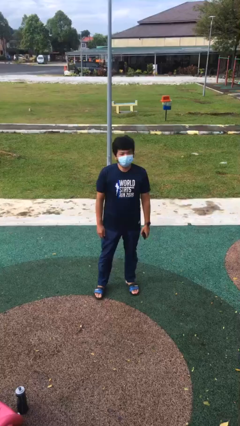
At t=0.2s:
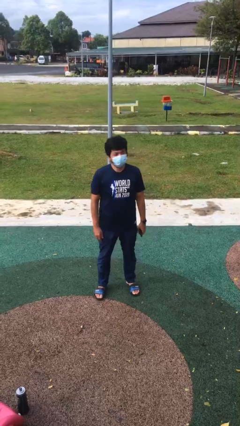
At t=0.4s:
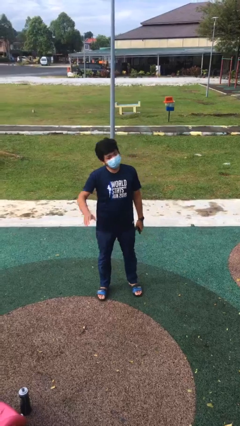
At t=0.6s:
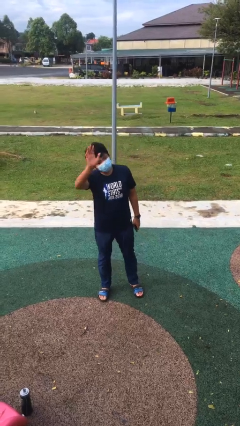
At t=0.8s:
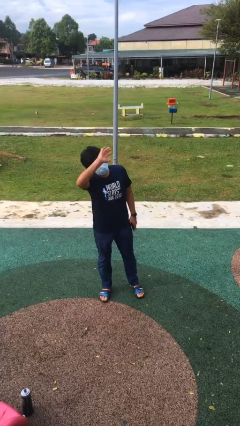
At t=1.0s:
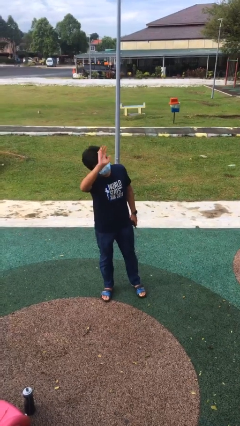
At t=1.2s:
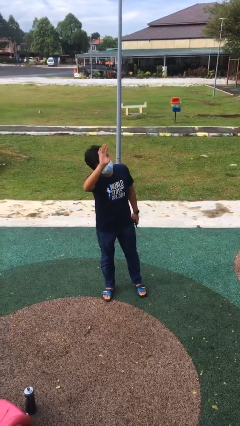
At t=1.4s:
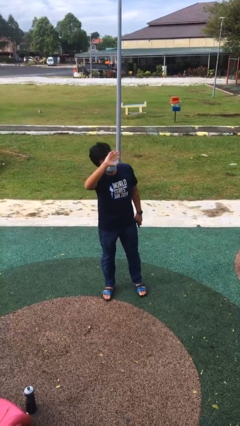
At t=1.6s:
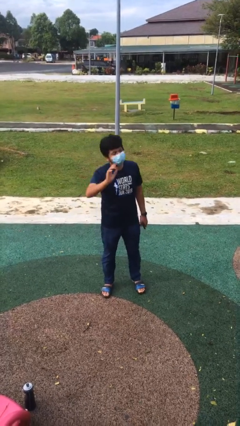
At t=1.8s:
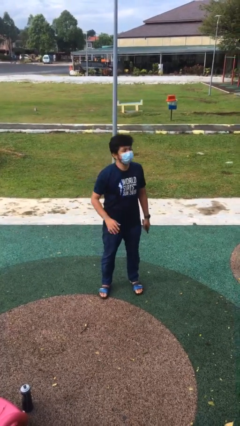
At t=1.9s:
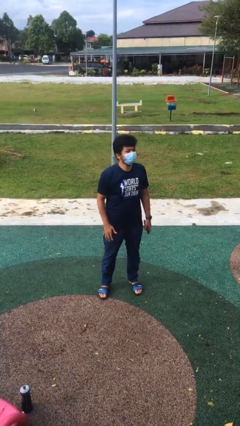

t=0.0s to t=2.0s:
person waves at person

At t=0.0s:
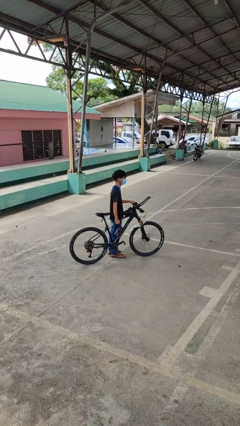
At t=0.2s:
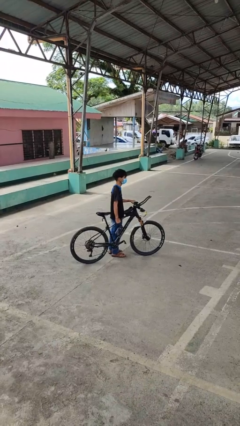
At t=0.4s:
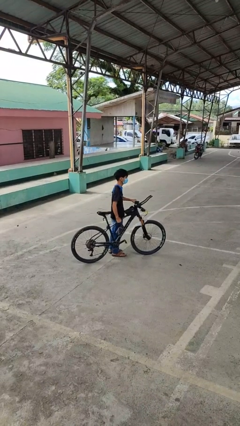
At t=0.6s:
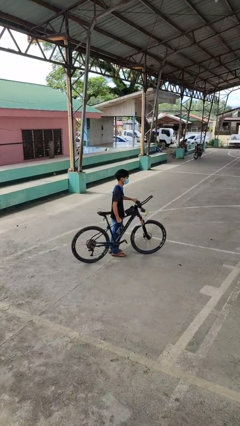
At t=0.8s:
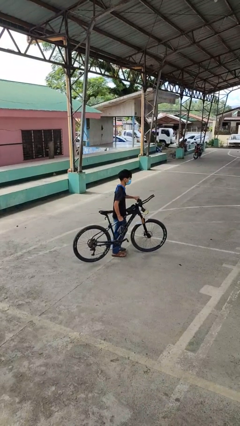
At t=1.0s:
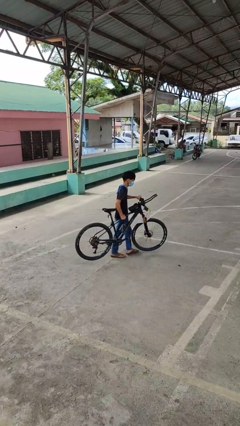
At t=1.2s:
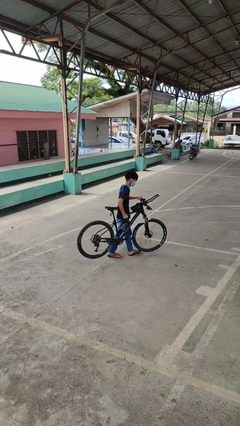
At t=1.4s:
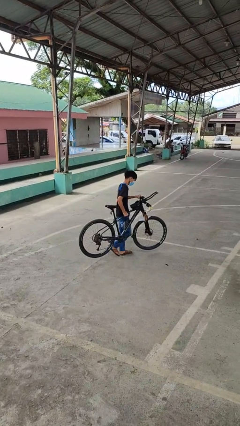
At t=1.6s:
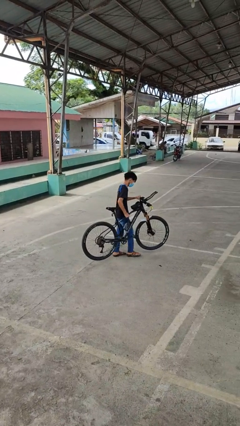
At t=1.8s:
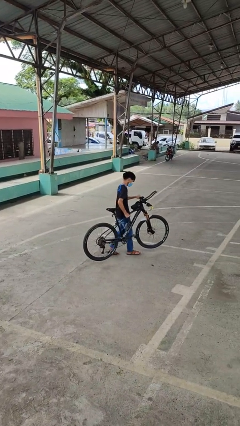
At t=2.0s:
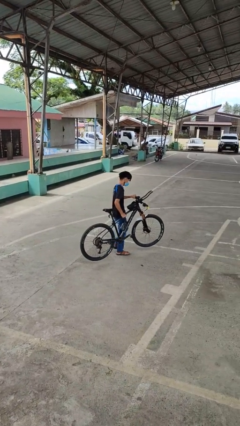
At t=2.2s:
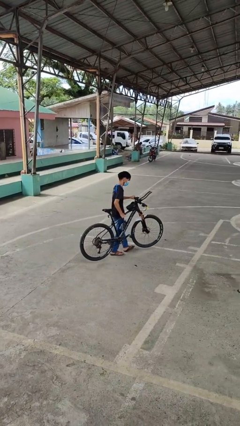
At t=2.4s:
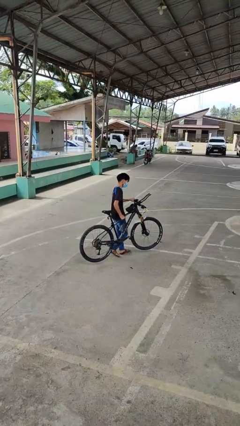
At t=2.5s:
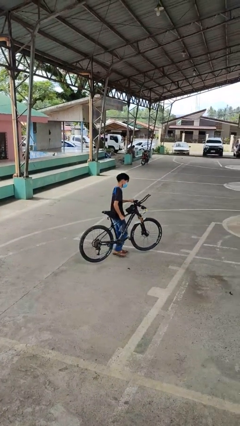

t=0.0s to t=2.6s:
person carries bicycle

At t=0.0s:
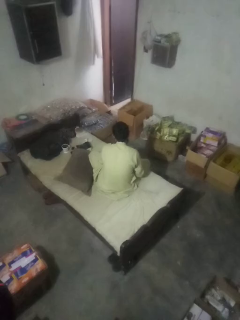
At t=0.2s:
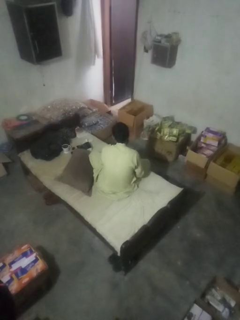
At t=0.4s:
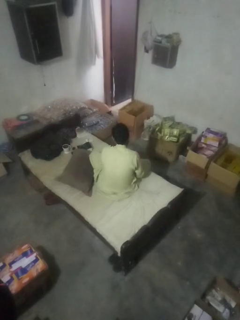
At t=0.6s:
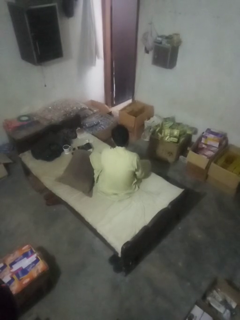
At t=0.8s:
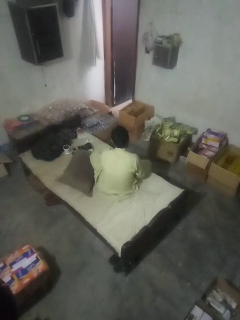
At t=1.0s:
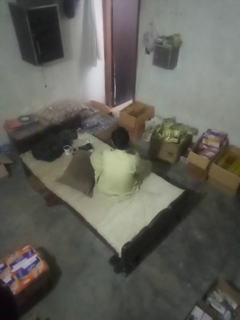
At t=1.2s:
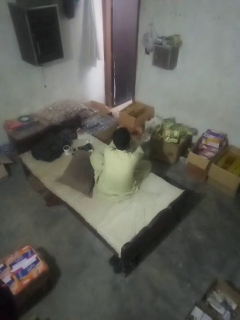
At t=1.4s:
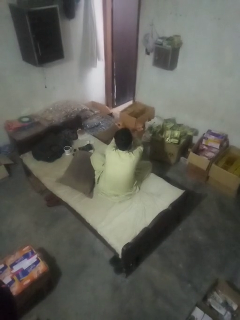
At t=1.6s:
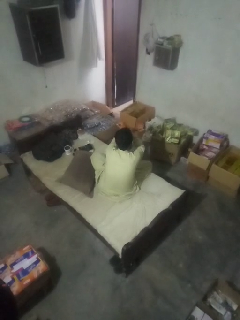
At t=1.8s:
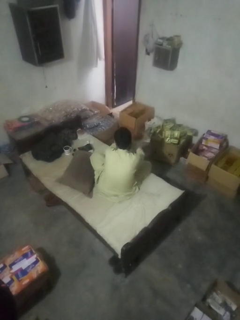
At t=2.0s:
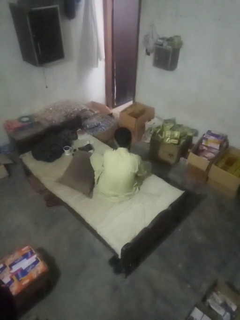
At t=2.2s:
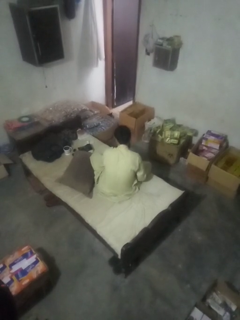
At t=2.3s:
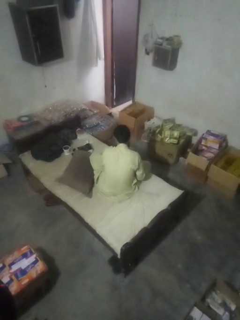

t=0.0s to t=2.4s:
person gestures arms x

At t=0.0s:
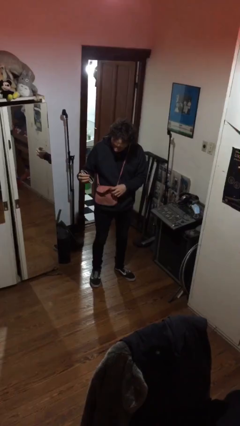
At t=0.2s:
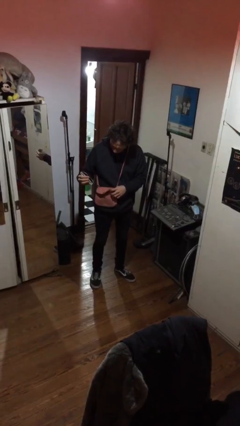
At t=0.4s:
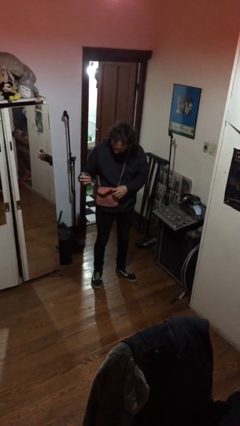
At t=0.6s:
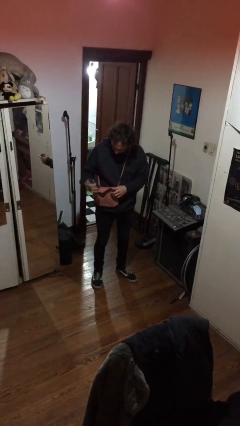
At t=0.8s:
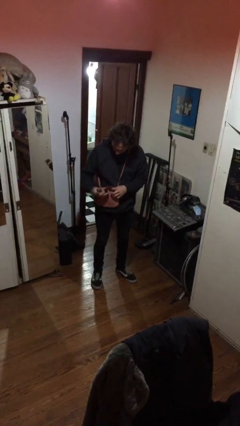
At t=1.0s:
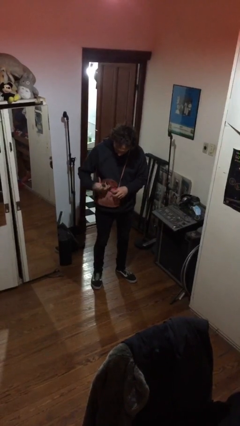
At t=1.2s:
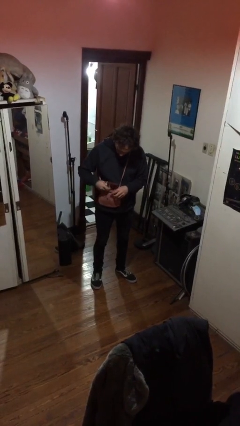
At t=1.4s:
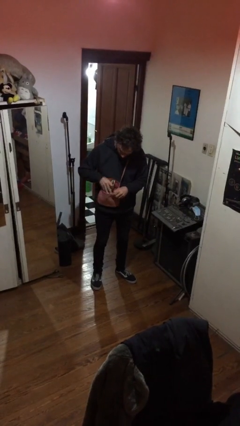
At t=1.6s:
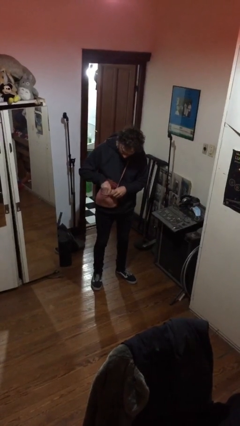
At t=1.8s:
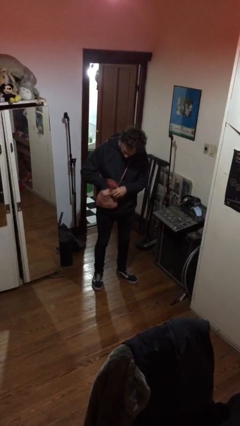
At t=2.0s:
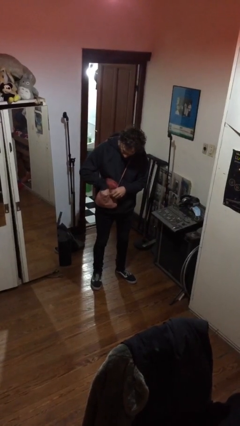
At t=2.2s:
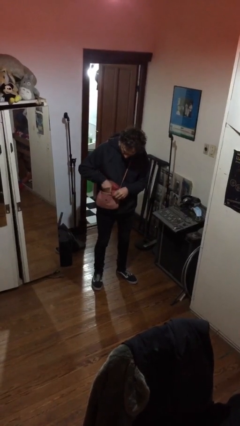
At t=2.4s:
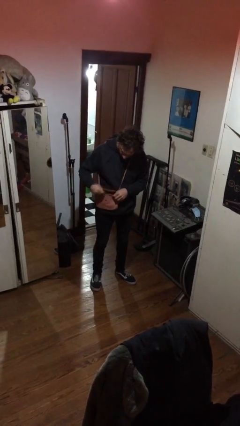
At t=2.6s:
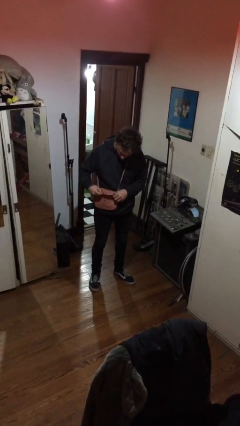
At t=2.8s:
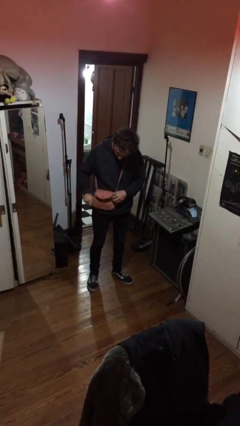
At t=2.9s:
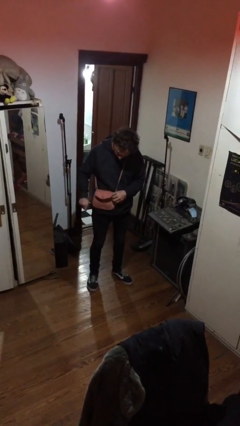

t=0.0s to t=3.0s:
person puts object into purse

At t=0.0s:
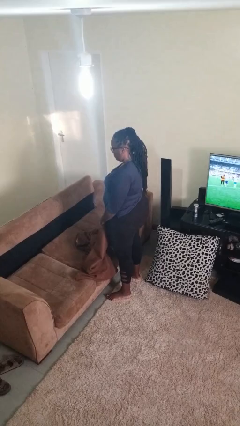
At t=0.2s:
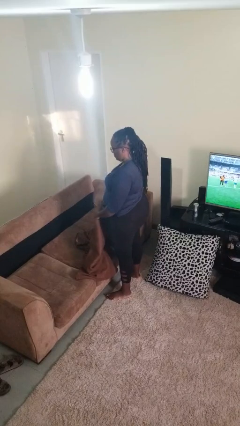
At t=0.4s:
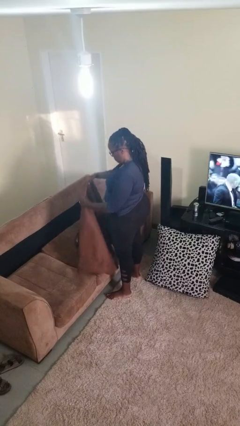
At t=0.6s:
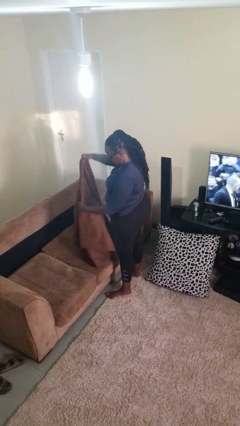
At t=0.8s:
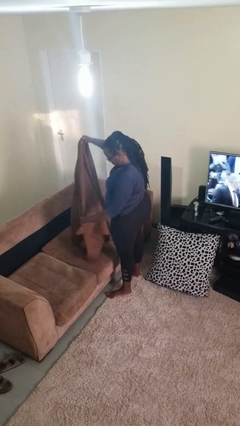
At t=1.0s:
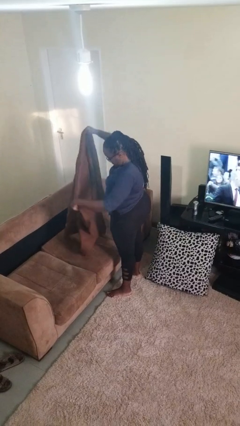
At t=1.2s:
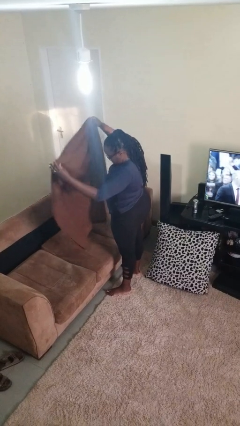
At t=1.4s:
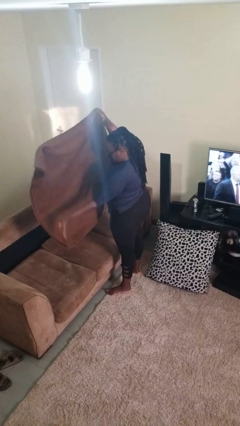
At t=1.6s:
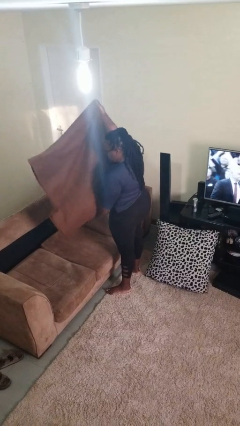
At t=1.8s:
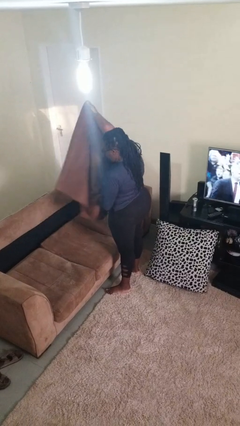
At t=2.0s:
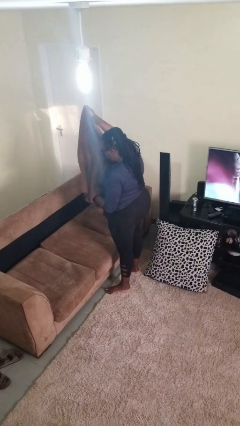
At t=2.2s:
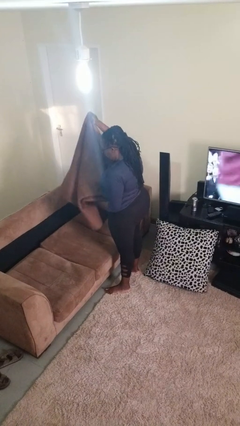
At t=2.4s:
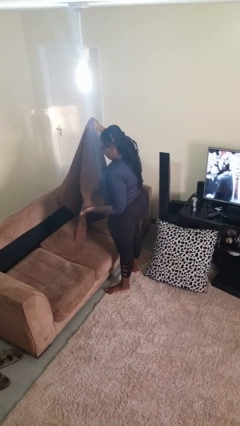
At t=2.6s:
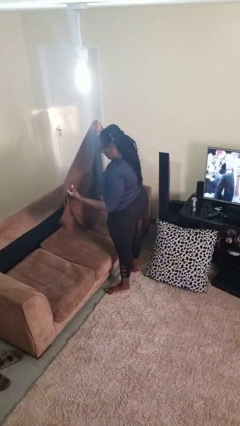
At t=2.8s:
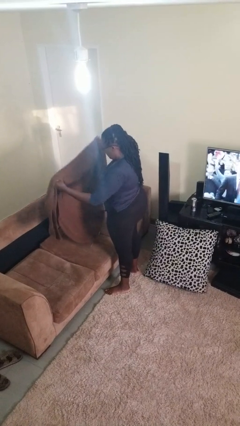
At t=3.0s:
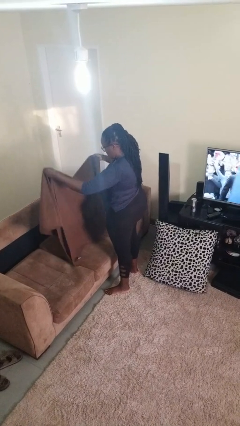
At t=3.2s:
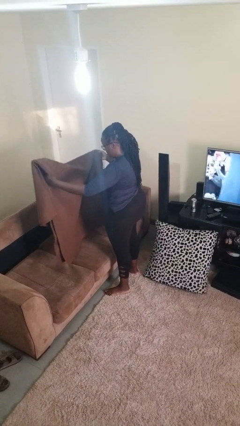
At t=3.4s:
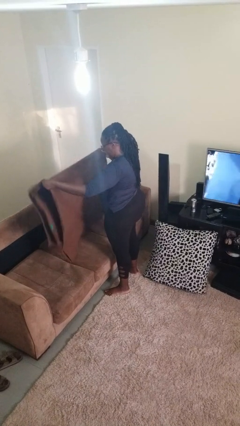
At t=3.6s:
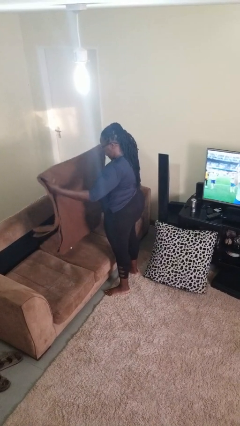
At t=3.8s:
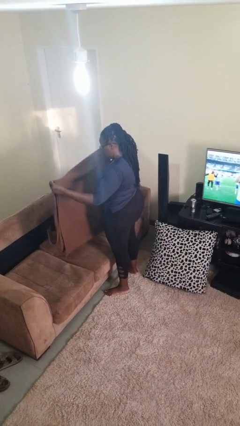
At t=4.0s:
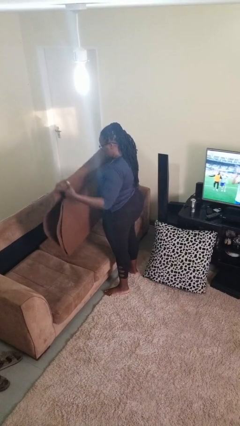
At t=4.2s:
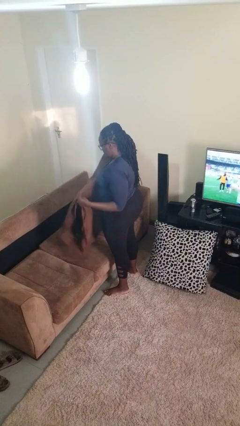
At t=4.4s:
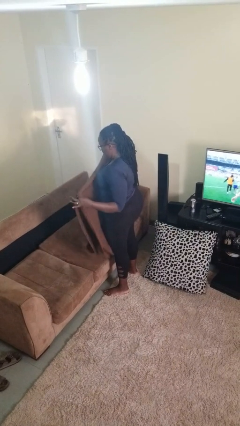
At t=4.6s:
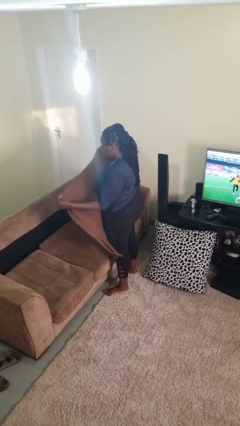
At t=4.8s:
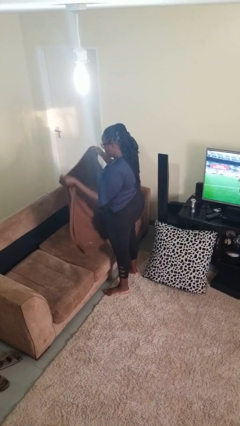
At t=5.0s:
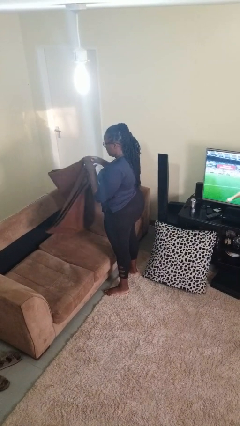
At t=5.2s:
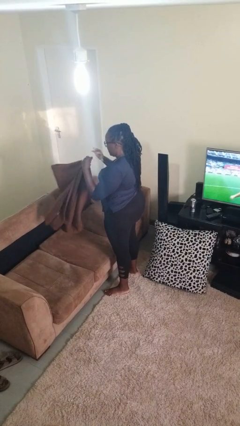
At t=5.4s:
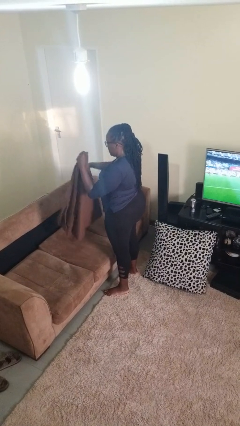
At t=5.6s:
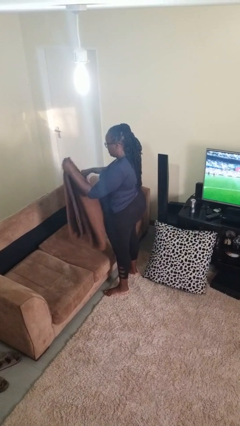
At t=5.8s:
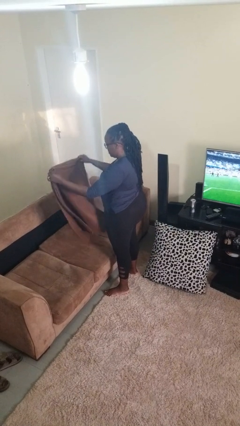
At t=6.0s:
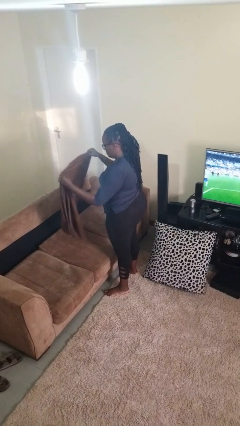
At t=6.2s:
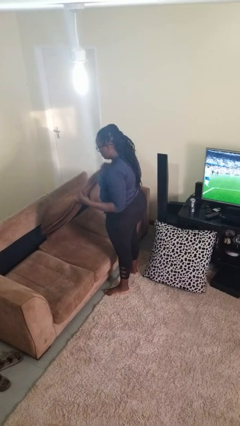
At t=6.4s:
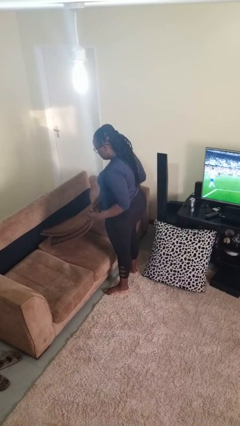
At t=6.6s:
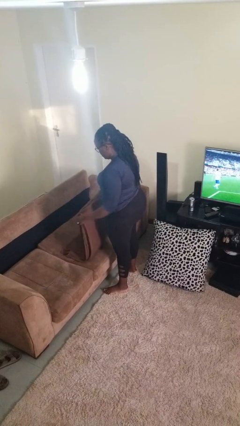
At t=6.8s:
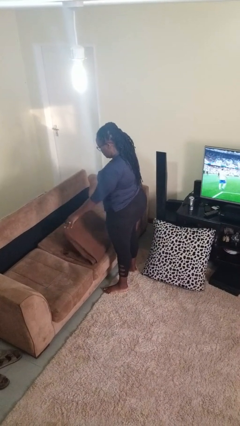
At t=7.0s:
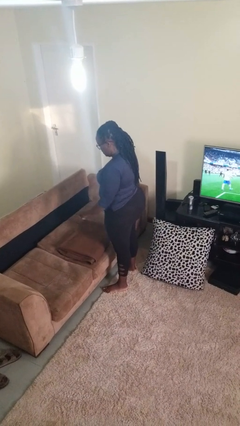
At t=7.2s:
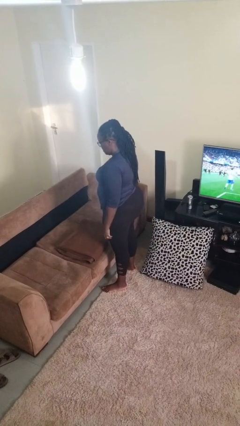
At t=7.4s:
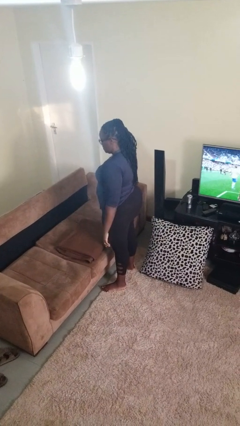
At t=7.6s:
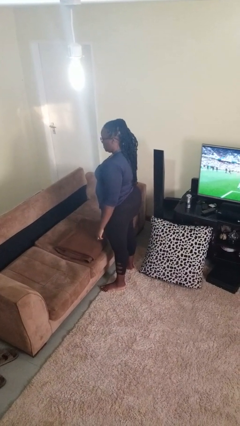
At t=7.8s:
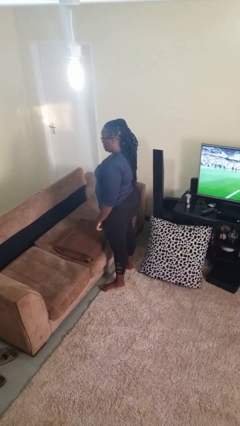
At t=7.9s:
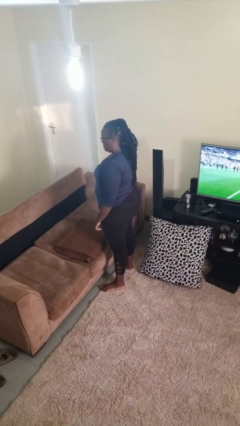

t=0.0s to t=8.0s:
person folds blanket
